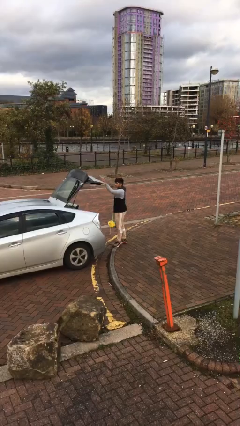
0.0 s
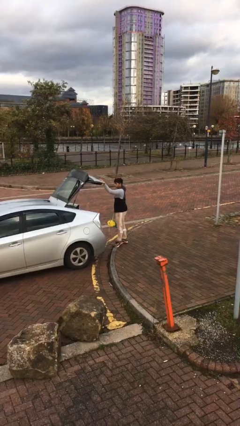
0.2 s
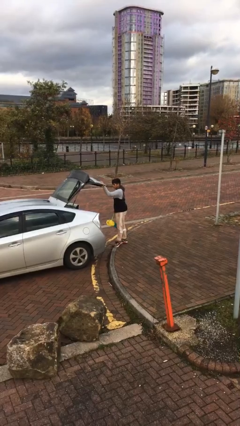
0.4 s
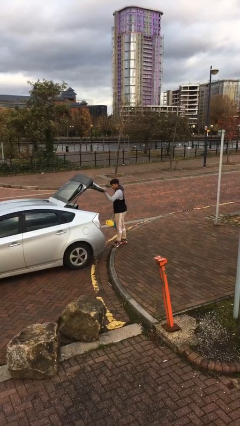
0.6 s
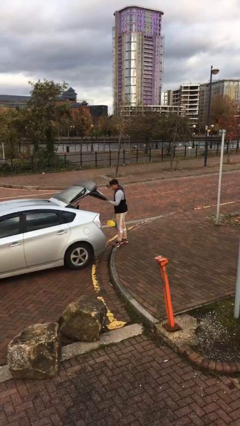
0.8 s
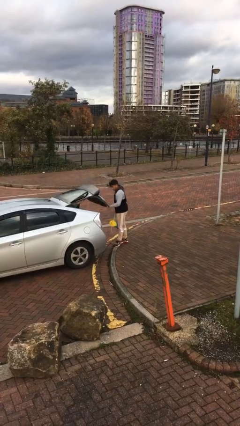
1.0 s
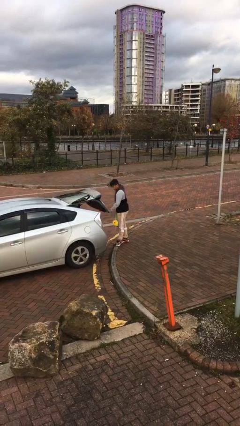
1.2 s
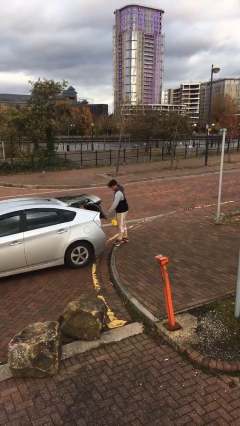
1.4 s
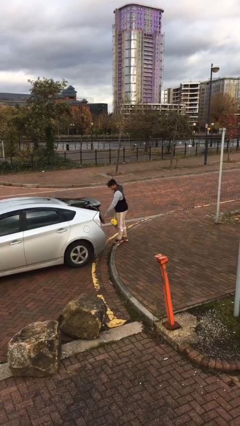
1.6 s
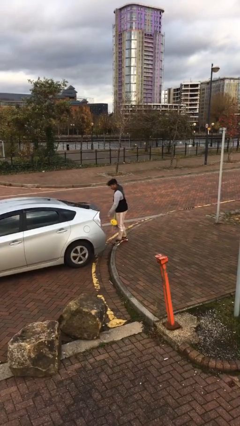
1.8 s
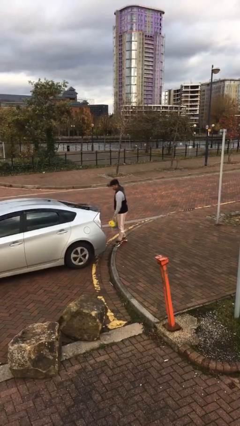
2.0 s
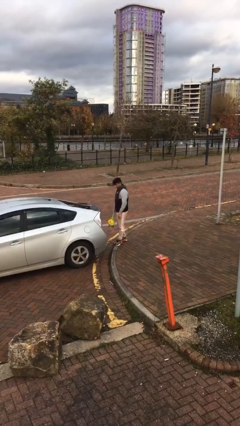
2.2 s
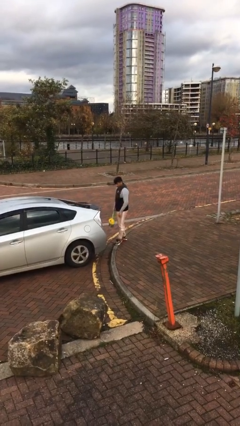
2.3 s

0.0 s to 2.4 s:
person closes car trunk

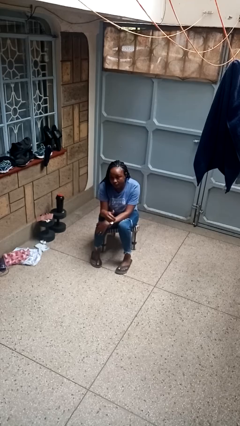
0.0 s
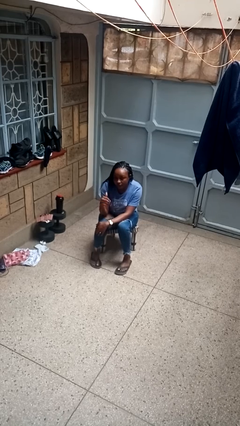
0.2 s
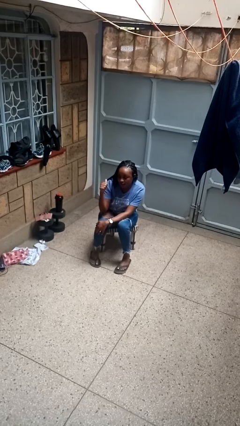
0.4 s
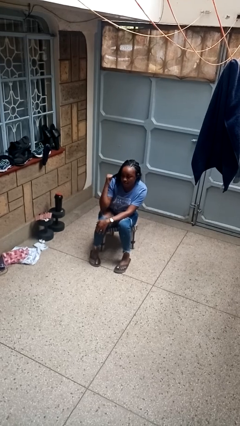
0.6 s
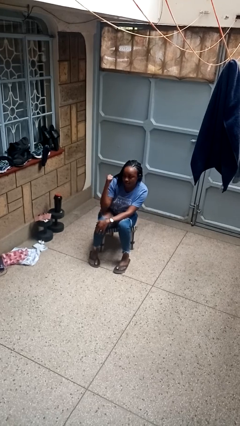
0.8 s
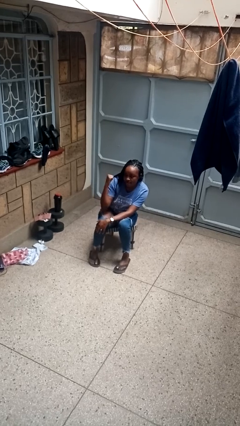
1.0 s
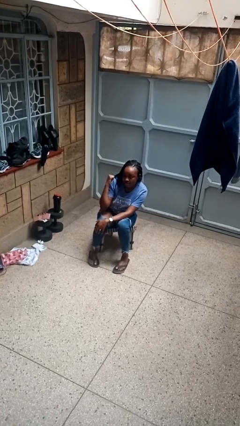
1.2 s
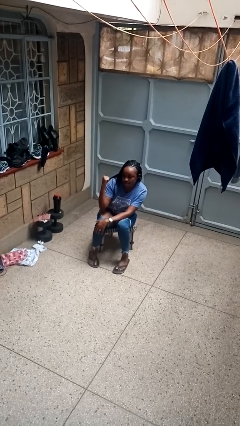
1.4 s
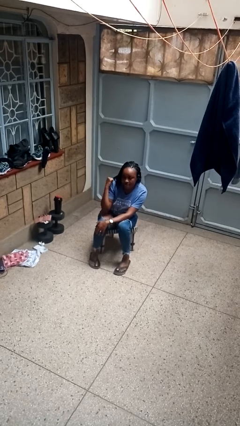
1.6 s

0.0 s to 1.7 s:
person gestures behind me

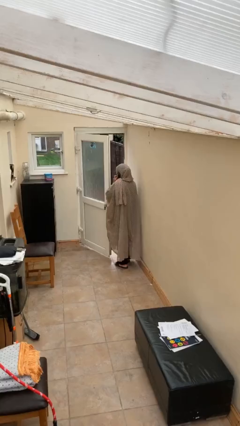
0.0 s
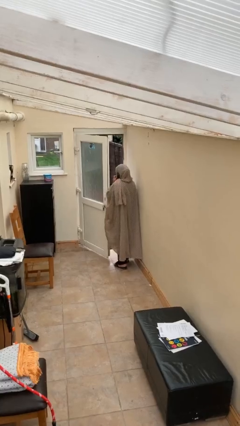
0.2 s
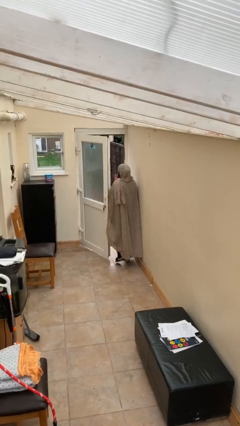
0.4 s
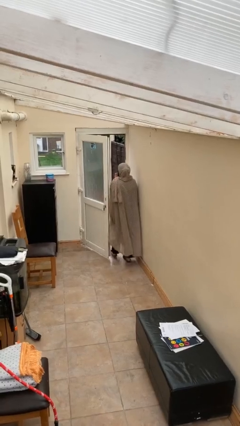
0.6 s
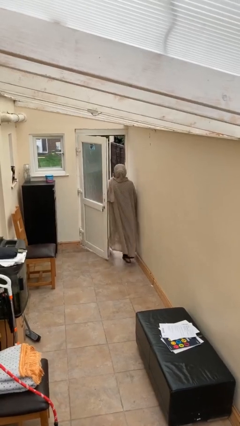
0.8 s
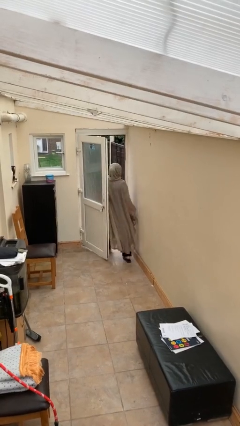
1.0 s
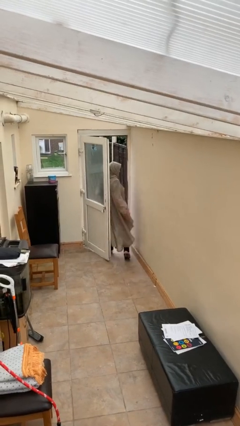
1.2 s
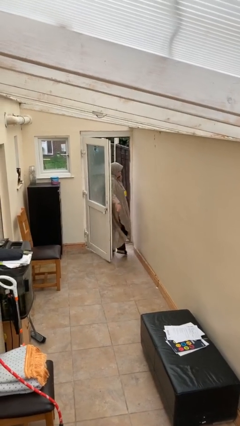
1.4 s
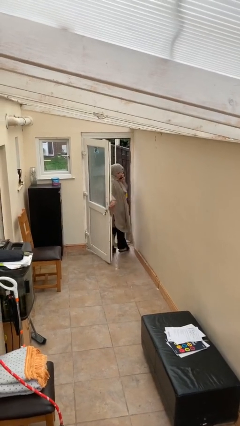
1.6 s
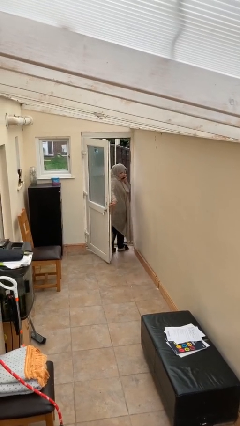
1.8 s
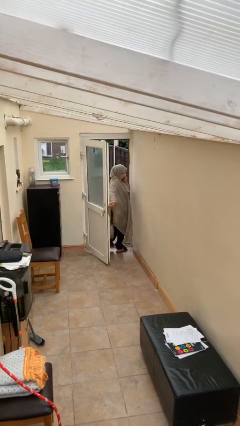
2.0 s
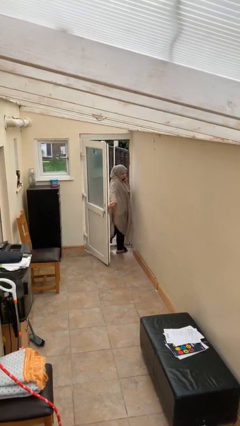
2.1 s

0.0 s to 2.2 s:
person exits scene through structure

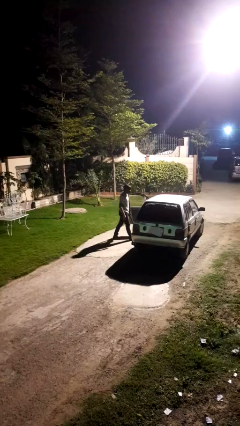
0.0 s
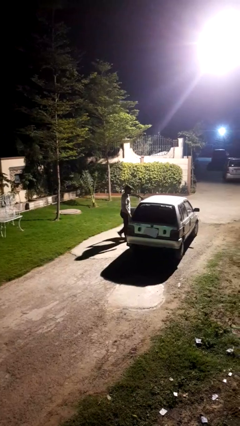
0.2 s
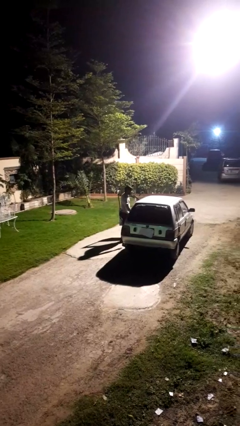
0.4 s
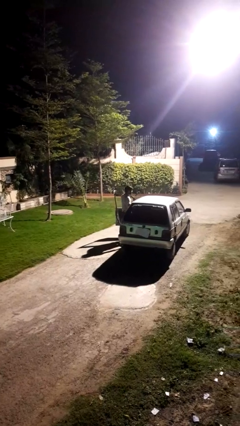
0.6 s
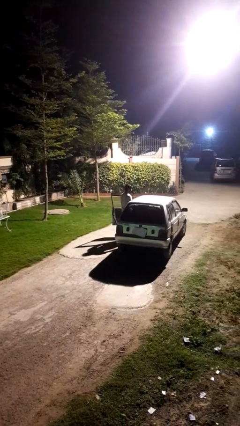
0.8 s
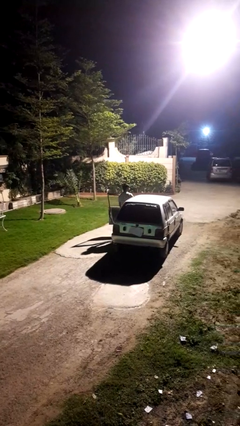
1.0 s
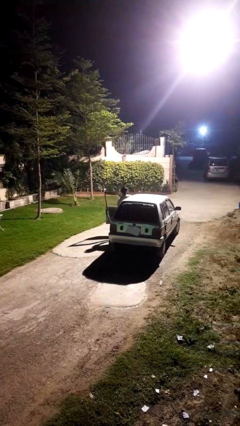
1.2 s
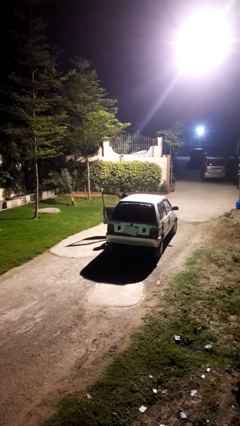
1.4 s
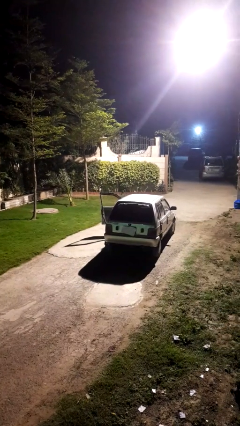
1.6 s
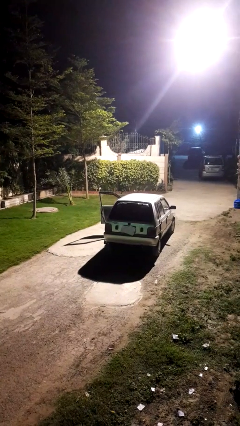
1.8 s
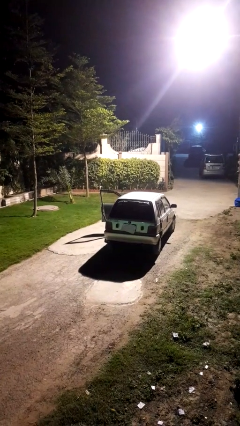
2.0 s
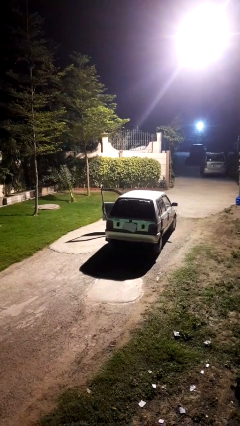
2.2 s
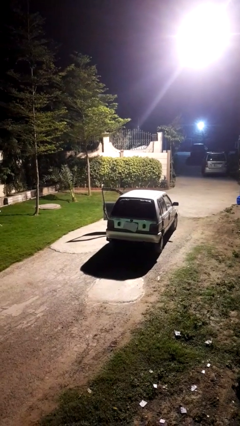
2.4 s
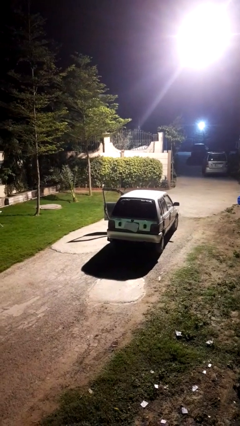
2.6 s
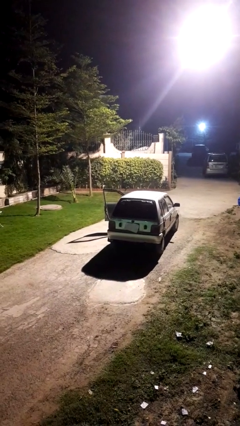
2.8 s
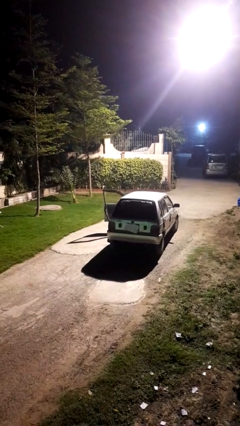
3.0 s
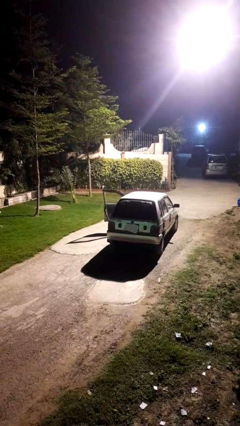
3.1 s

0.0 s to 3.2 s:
person enters car

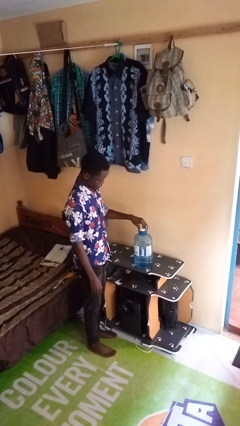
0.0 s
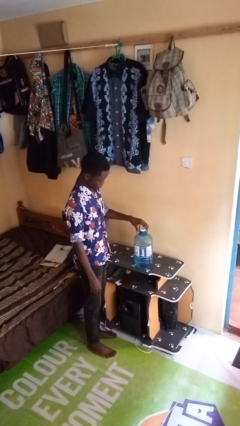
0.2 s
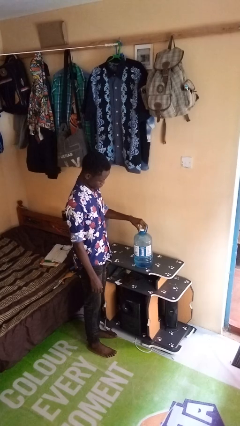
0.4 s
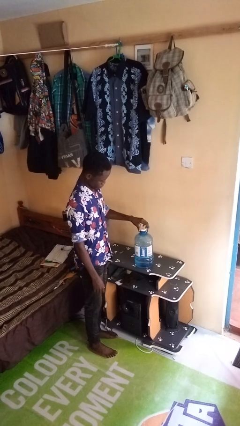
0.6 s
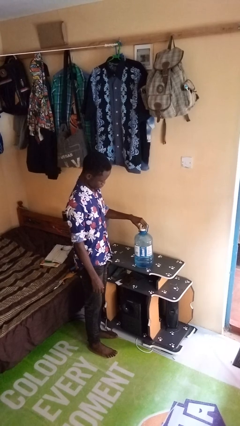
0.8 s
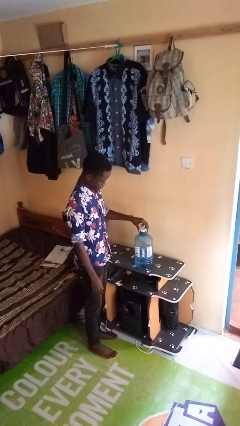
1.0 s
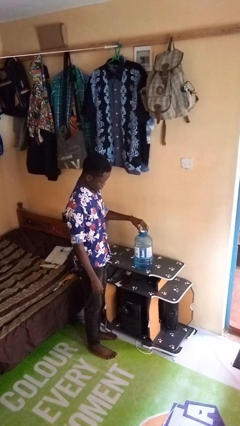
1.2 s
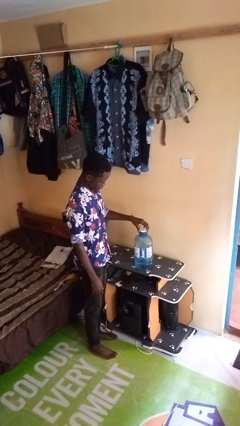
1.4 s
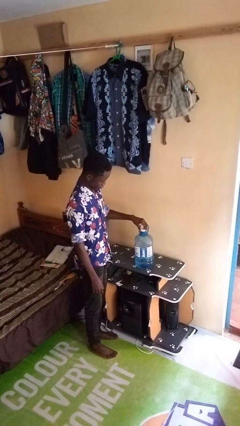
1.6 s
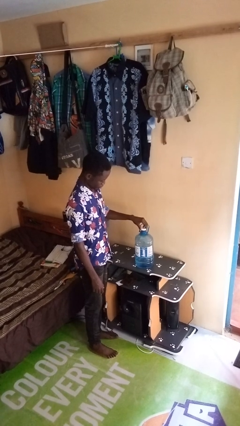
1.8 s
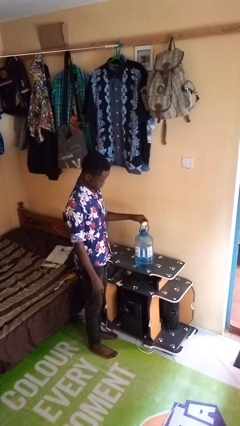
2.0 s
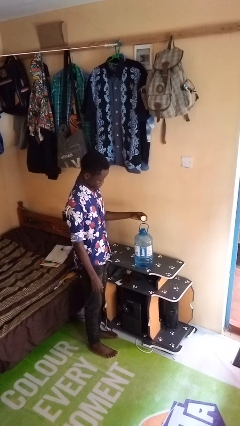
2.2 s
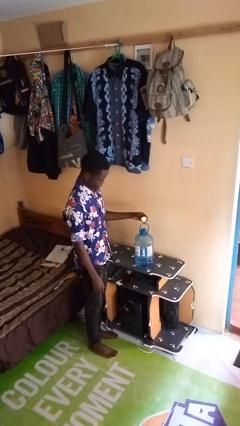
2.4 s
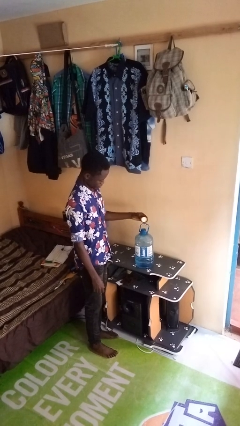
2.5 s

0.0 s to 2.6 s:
person unscrews lid from bottle

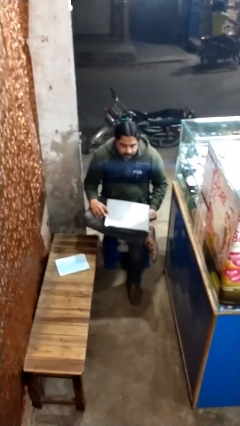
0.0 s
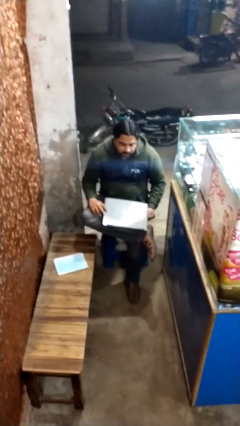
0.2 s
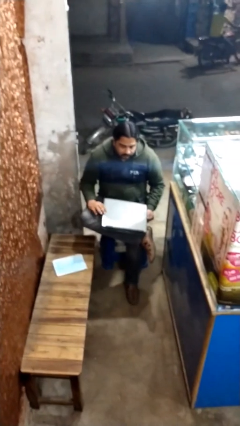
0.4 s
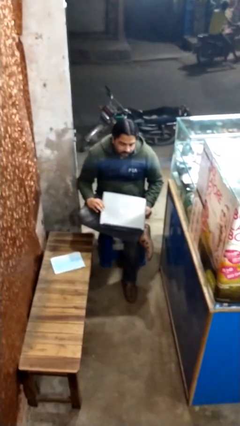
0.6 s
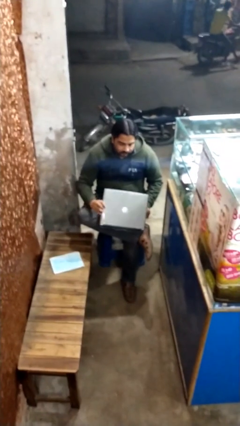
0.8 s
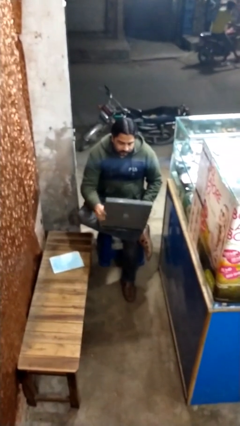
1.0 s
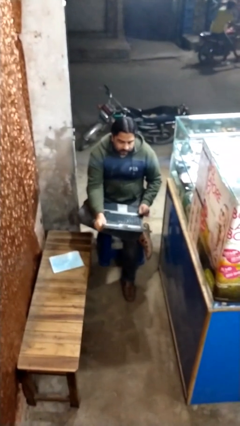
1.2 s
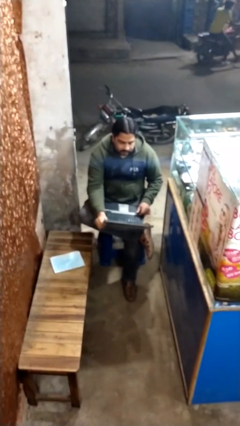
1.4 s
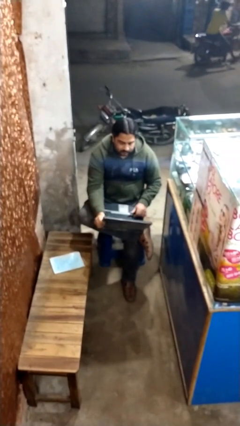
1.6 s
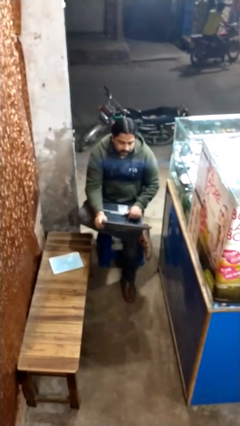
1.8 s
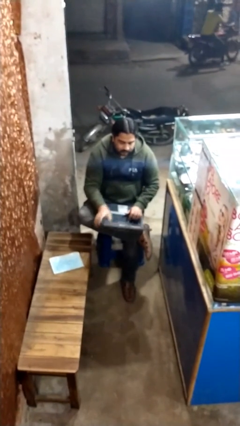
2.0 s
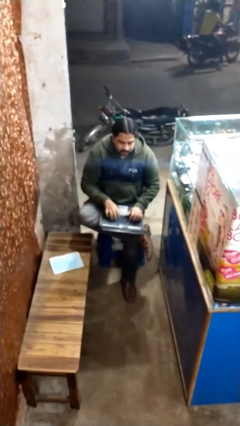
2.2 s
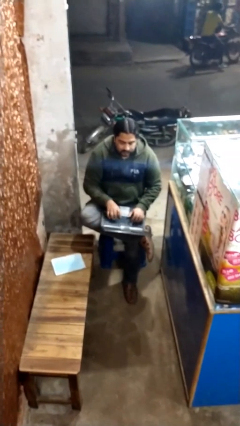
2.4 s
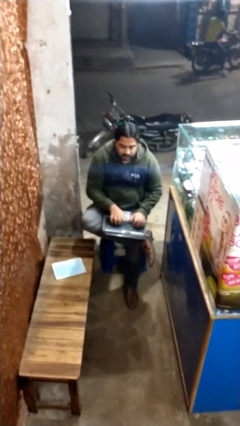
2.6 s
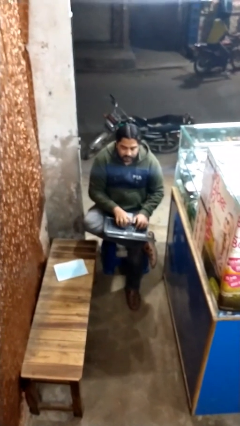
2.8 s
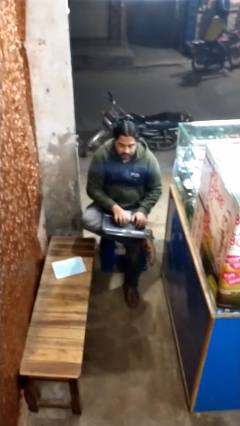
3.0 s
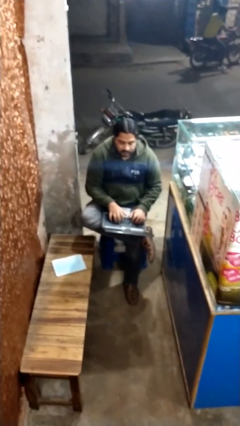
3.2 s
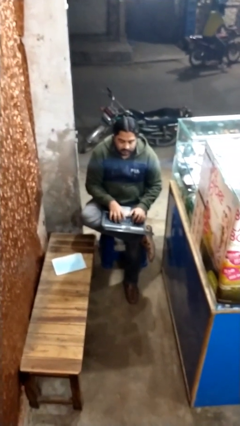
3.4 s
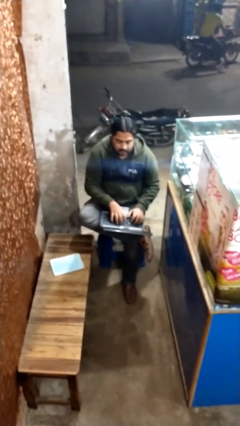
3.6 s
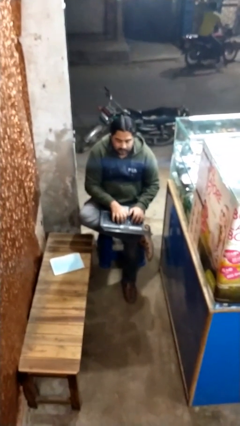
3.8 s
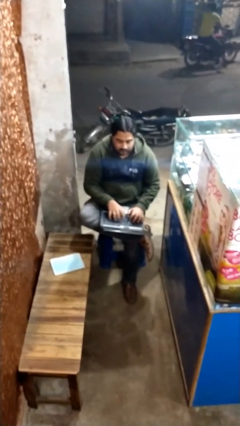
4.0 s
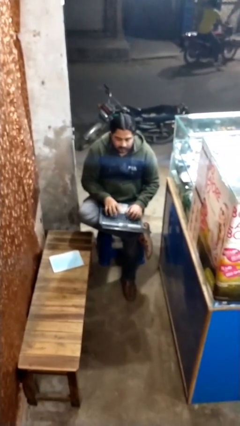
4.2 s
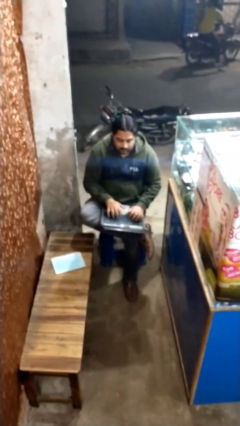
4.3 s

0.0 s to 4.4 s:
person interacts with laptop

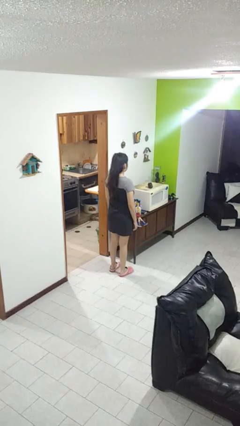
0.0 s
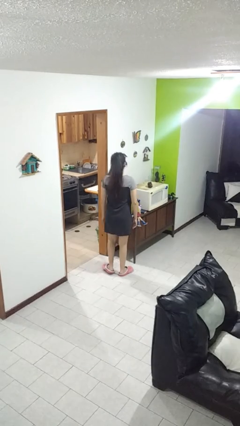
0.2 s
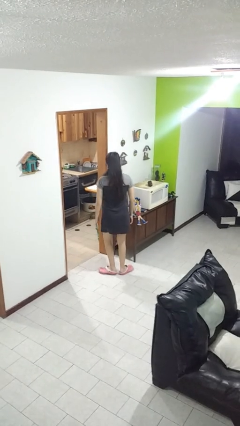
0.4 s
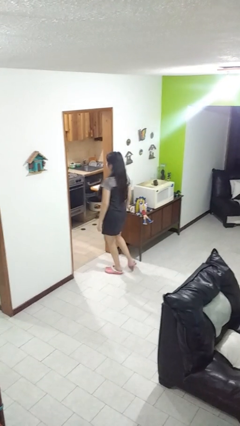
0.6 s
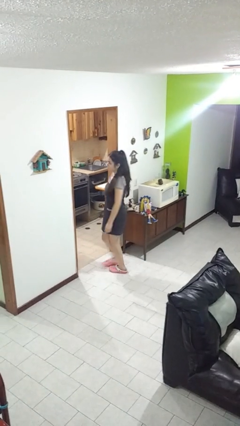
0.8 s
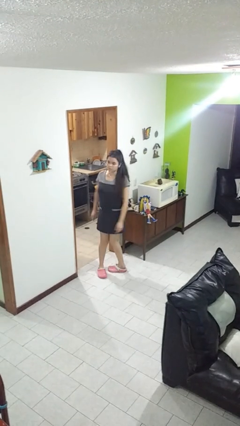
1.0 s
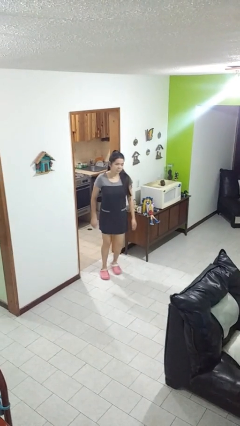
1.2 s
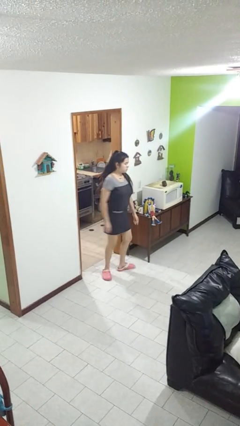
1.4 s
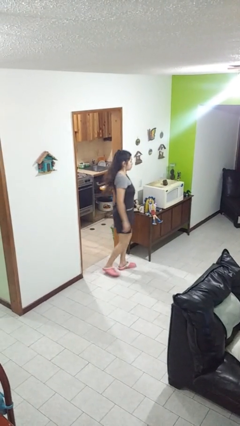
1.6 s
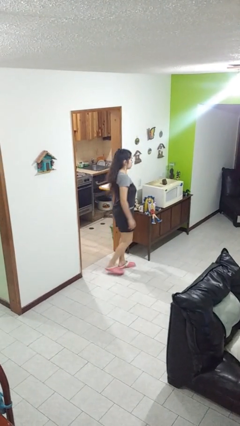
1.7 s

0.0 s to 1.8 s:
person twirls
